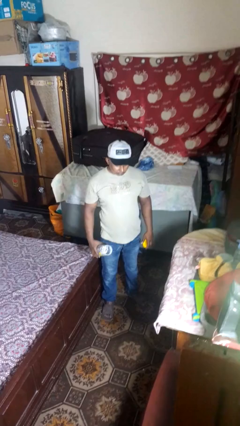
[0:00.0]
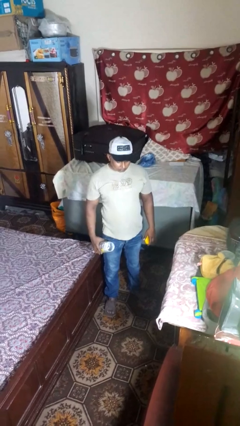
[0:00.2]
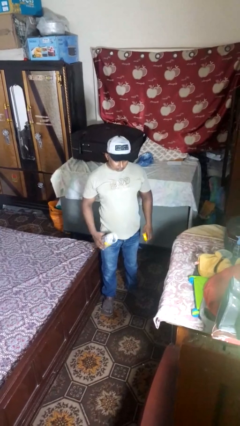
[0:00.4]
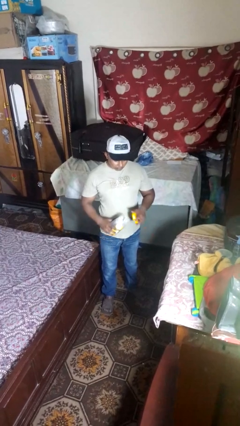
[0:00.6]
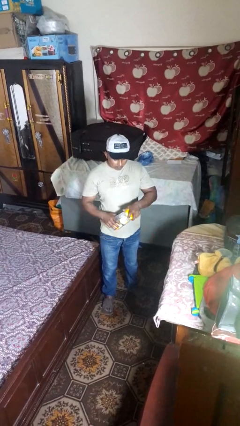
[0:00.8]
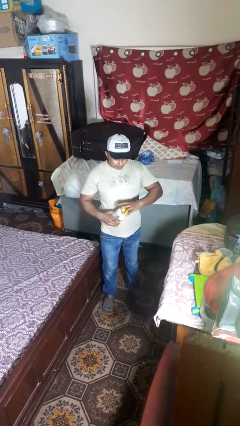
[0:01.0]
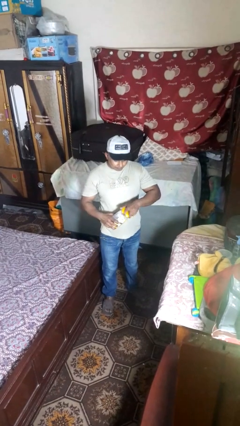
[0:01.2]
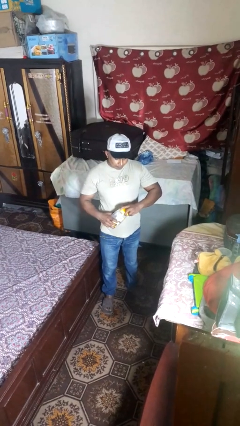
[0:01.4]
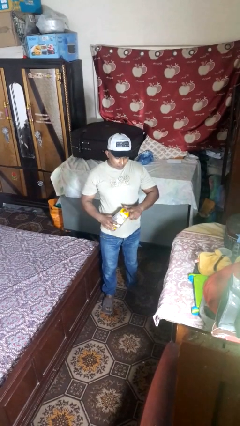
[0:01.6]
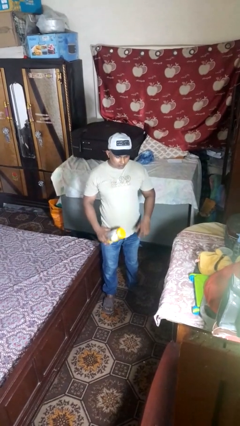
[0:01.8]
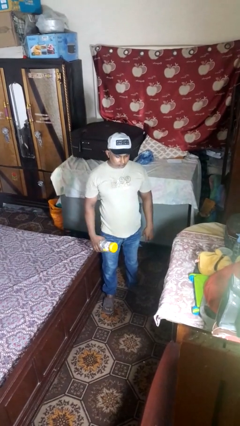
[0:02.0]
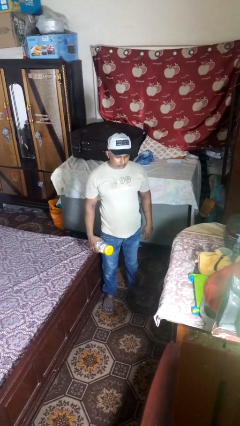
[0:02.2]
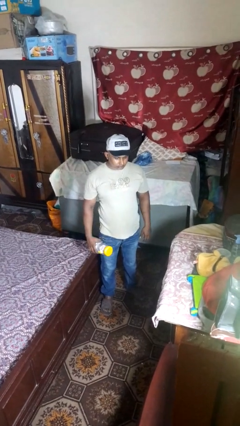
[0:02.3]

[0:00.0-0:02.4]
person closes jar

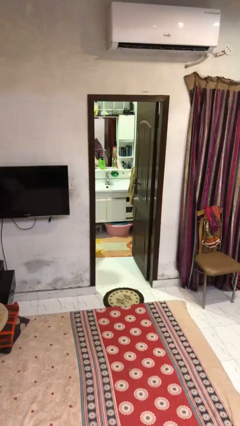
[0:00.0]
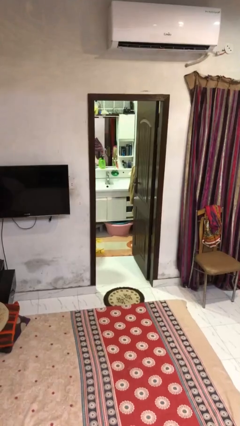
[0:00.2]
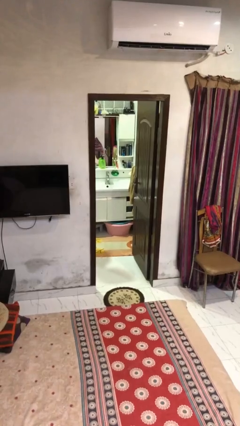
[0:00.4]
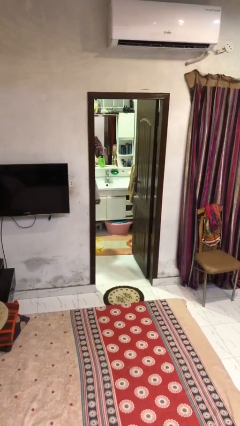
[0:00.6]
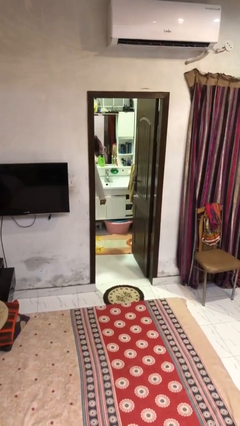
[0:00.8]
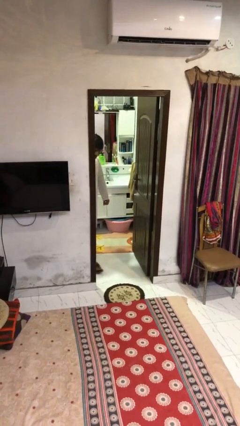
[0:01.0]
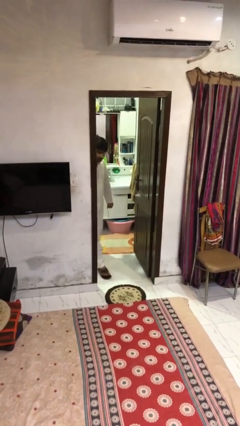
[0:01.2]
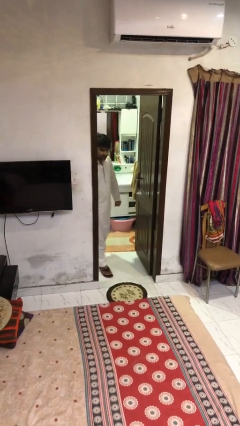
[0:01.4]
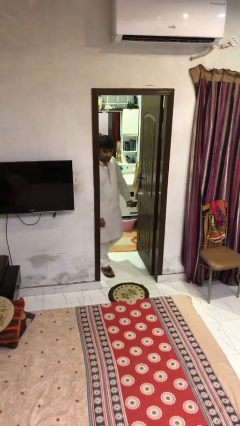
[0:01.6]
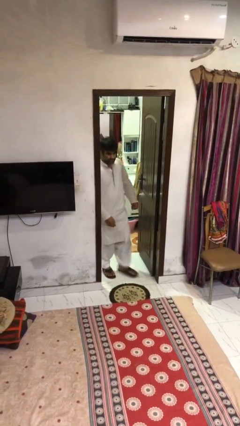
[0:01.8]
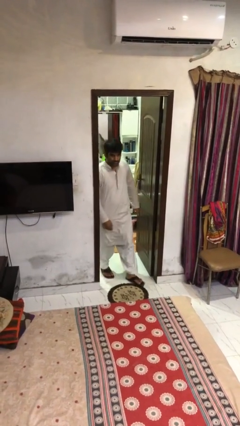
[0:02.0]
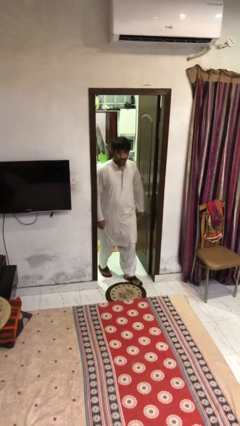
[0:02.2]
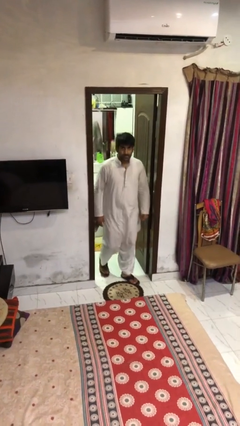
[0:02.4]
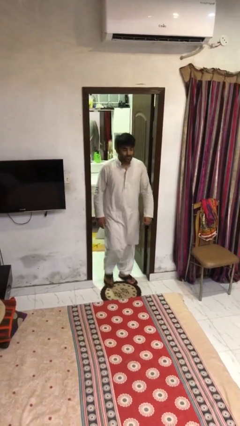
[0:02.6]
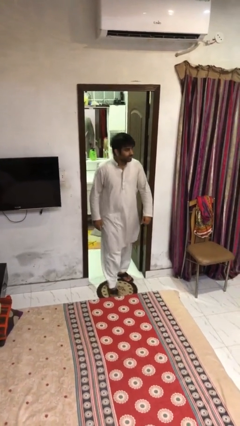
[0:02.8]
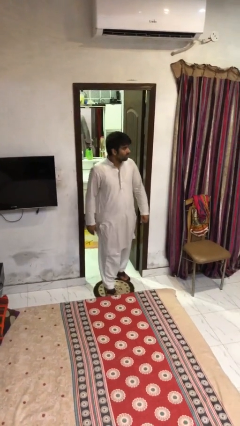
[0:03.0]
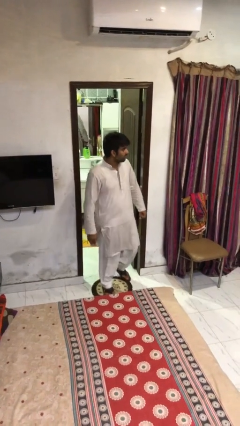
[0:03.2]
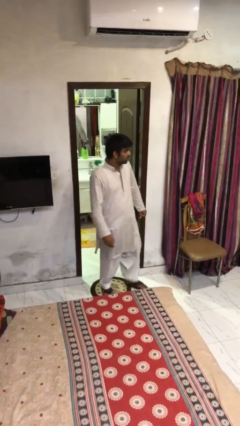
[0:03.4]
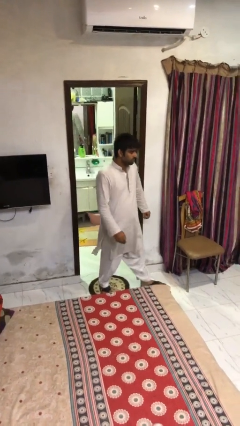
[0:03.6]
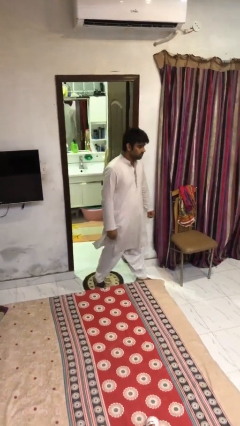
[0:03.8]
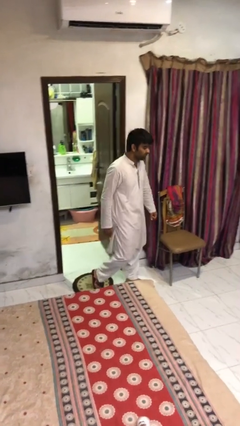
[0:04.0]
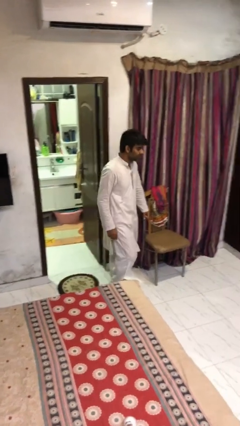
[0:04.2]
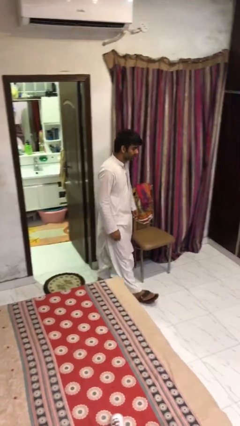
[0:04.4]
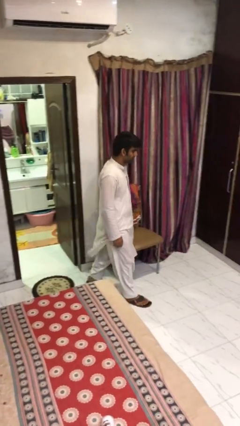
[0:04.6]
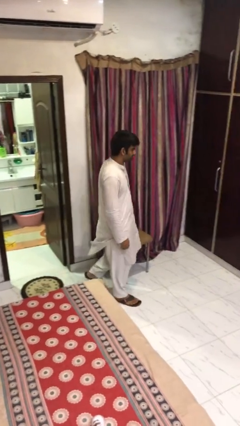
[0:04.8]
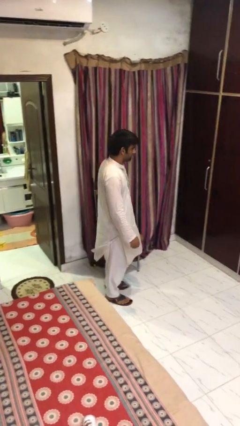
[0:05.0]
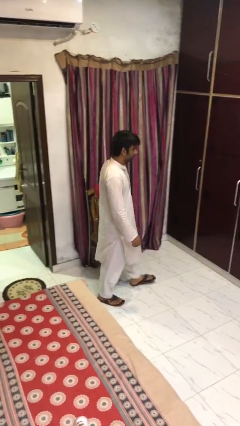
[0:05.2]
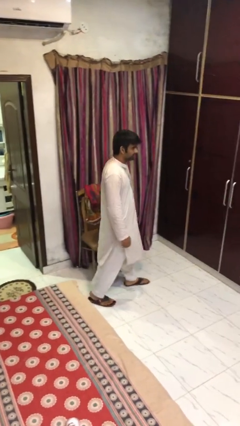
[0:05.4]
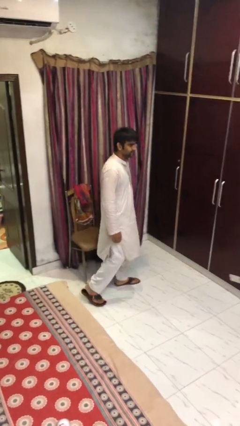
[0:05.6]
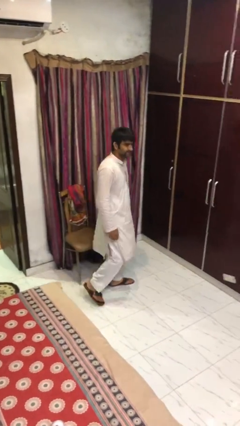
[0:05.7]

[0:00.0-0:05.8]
person enters scene through structure

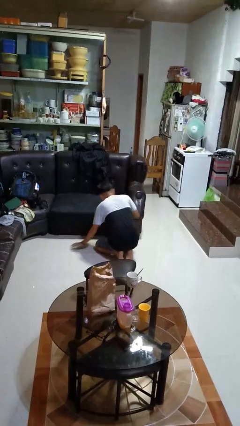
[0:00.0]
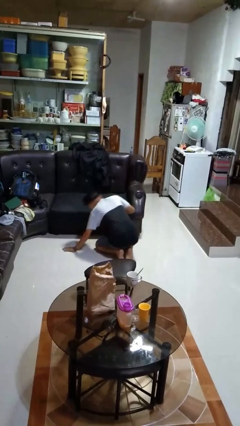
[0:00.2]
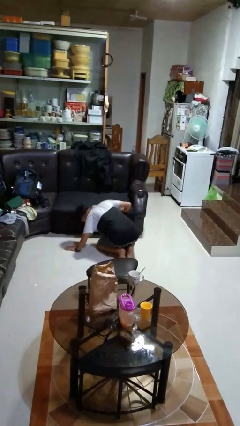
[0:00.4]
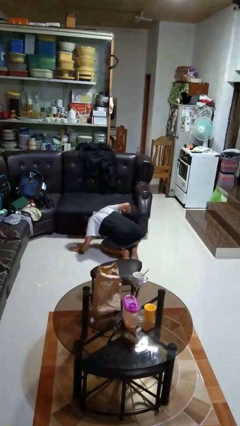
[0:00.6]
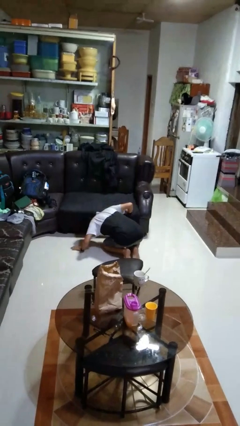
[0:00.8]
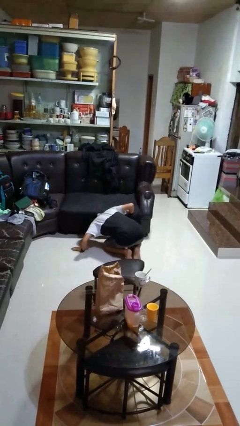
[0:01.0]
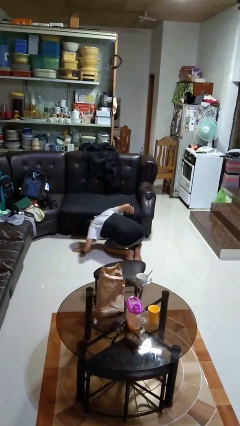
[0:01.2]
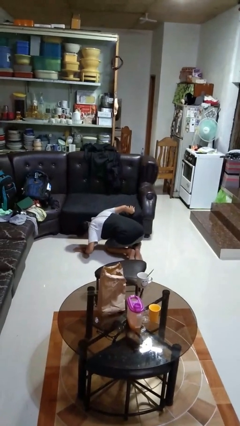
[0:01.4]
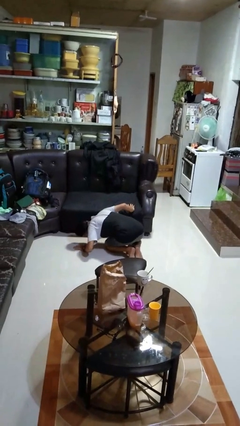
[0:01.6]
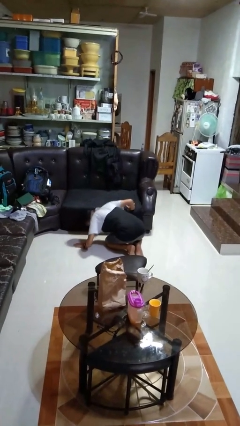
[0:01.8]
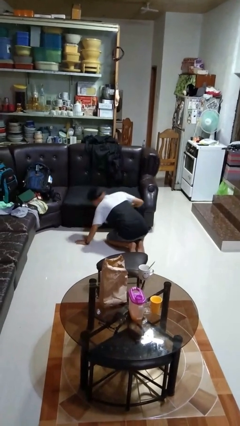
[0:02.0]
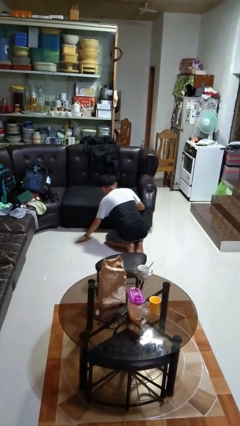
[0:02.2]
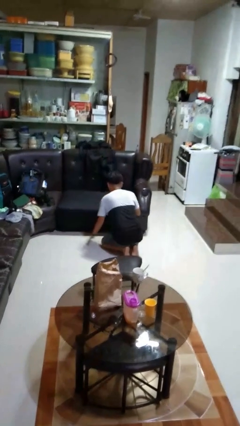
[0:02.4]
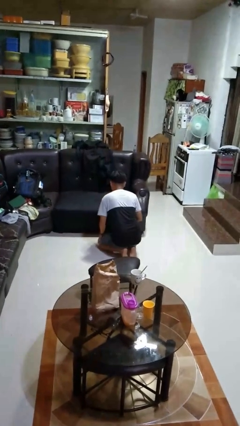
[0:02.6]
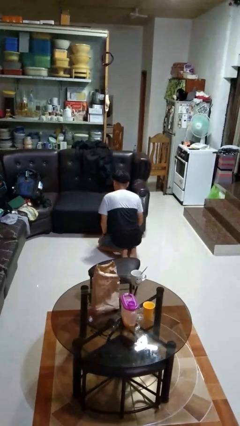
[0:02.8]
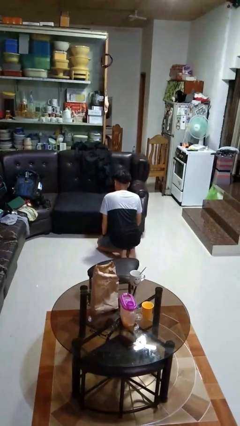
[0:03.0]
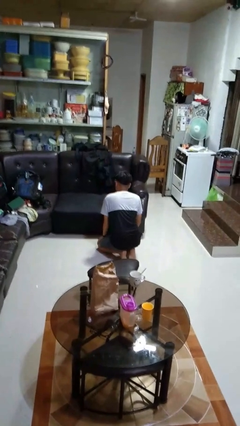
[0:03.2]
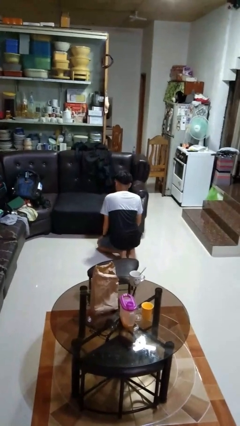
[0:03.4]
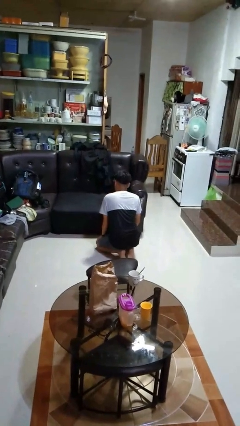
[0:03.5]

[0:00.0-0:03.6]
person searches under couch

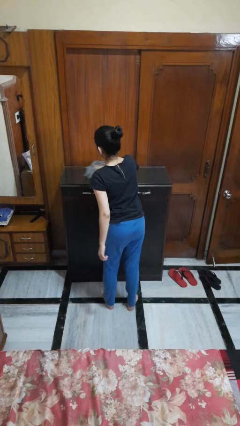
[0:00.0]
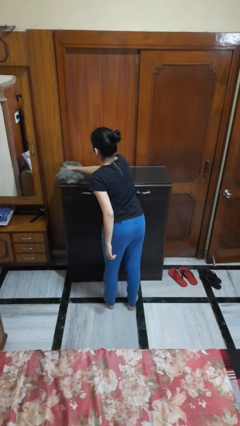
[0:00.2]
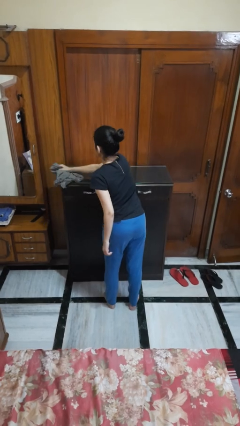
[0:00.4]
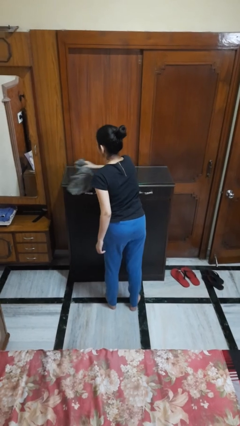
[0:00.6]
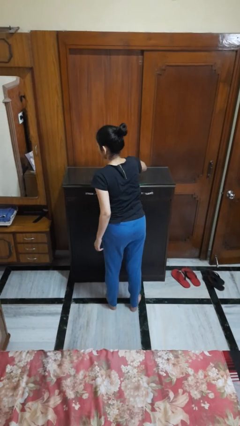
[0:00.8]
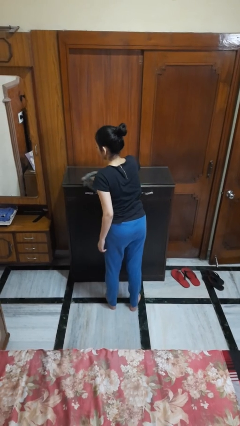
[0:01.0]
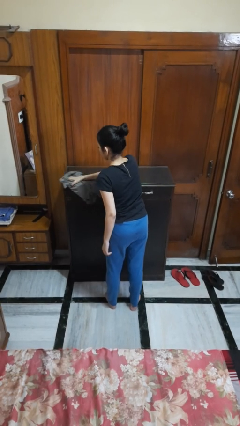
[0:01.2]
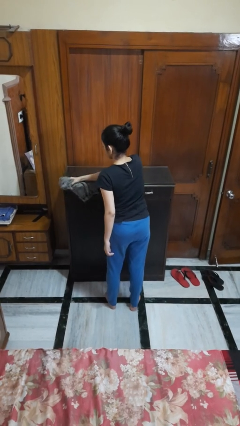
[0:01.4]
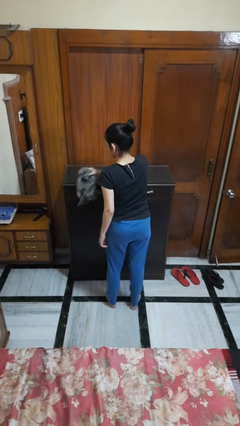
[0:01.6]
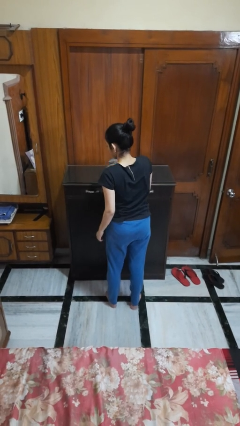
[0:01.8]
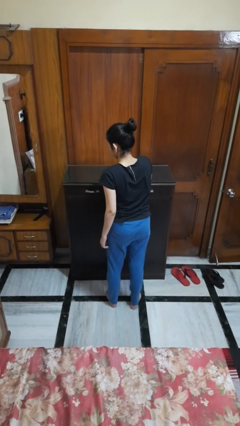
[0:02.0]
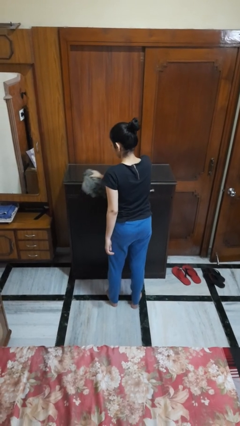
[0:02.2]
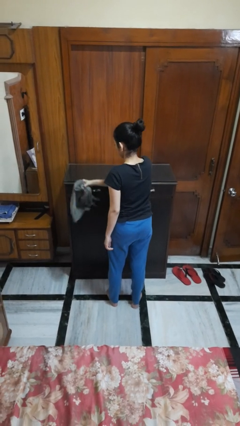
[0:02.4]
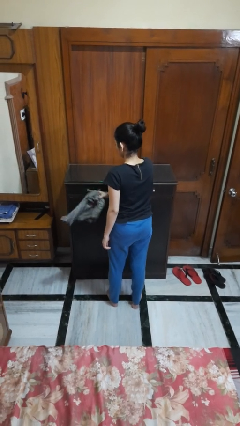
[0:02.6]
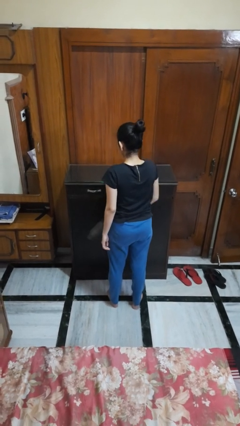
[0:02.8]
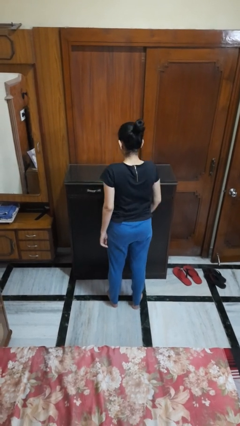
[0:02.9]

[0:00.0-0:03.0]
person cleans table with rag

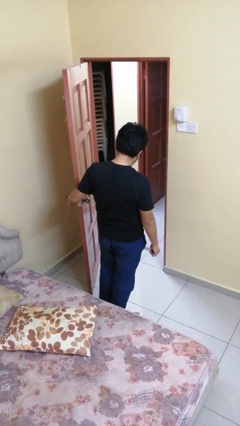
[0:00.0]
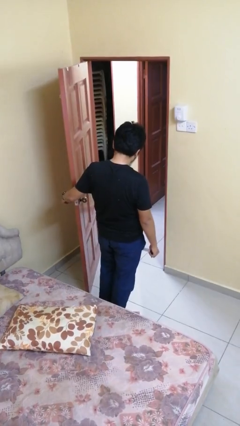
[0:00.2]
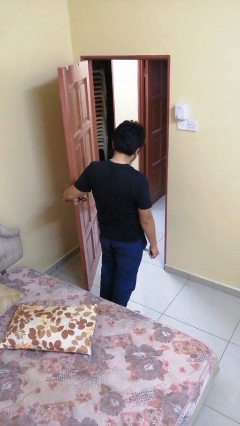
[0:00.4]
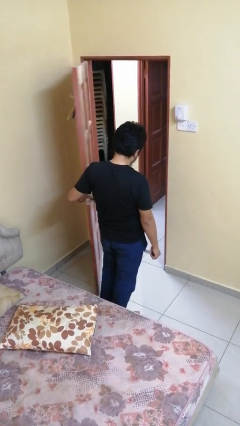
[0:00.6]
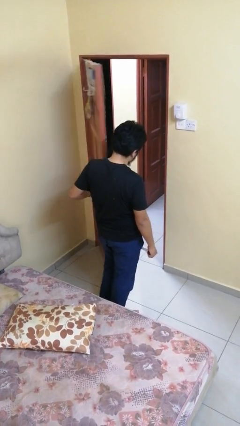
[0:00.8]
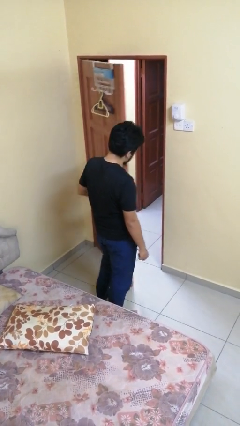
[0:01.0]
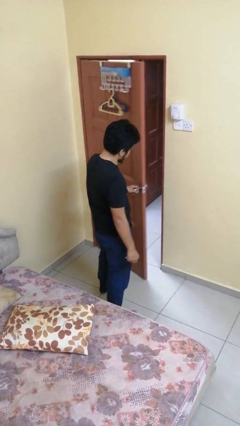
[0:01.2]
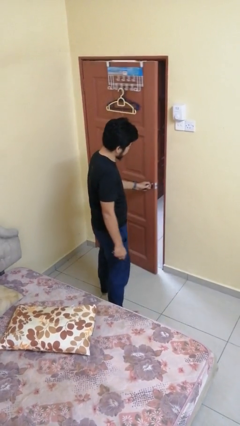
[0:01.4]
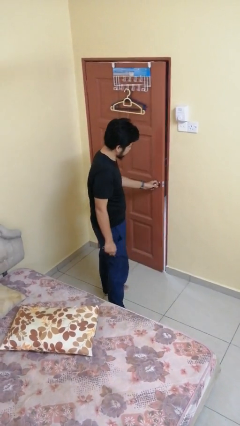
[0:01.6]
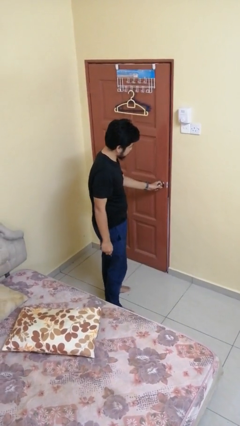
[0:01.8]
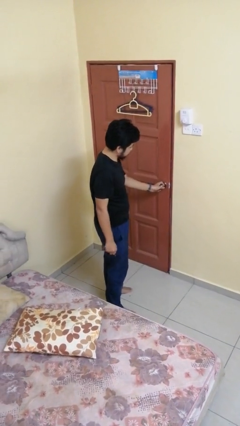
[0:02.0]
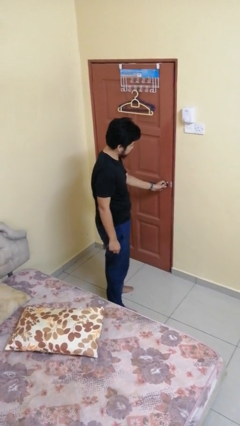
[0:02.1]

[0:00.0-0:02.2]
person closes facility door

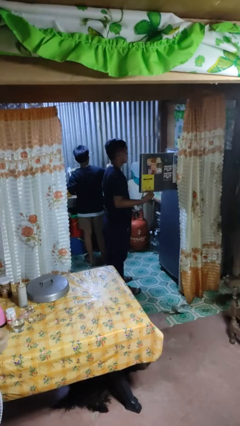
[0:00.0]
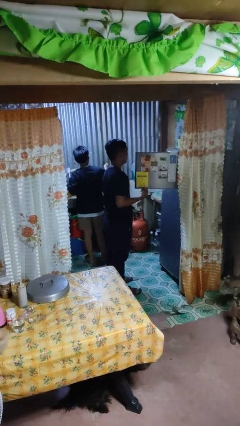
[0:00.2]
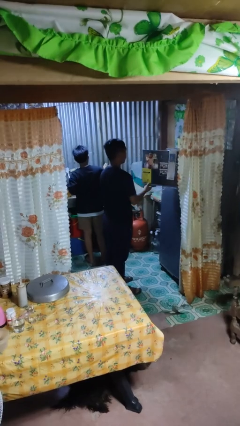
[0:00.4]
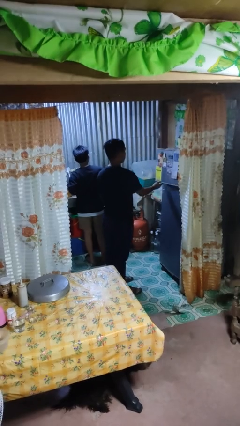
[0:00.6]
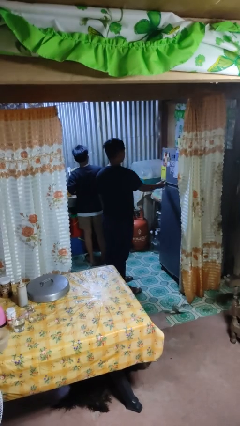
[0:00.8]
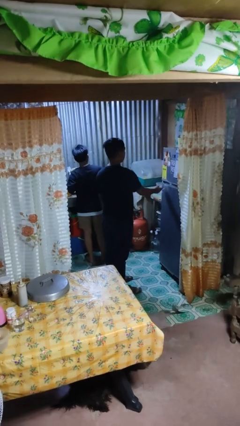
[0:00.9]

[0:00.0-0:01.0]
person closes refrigerator
